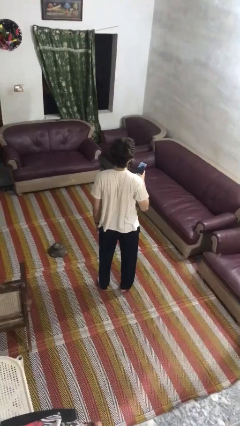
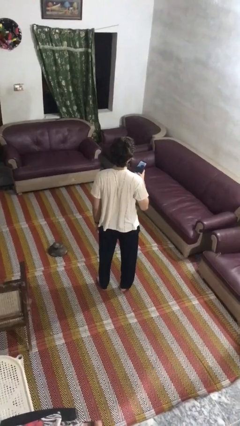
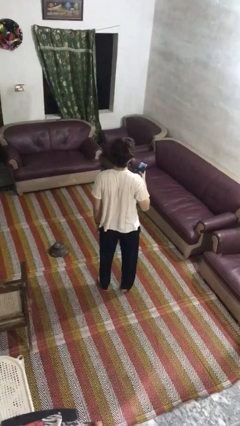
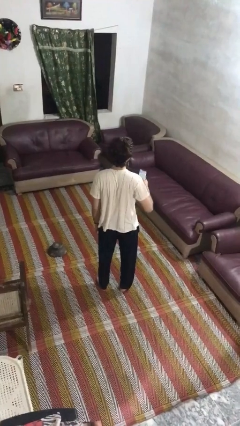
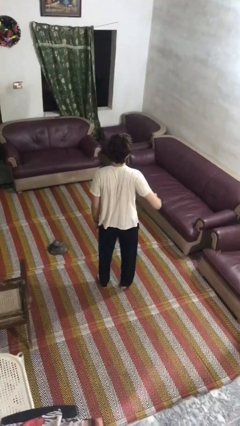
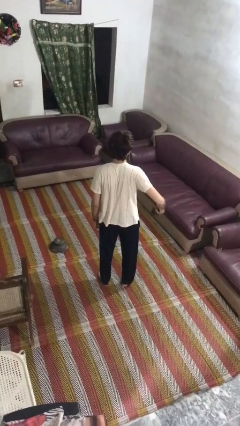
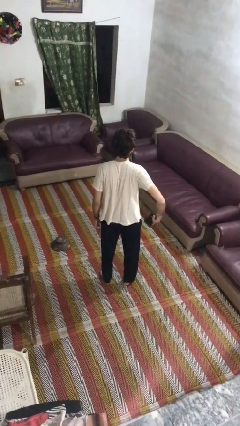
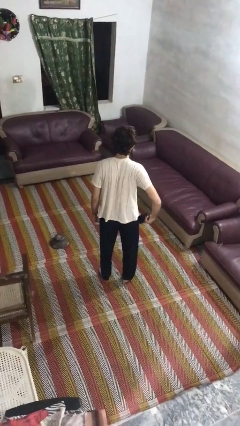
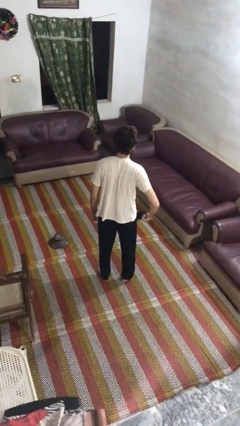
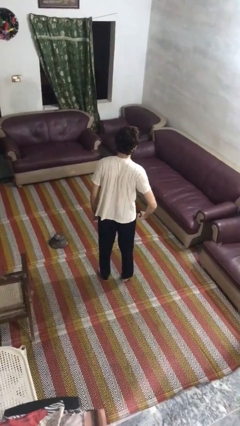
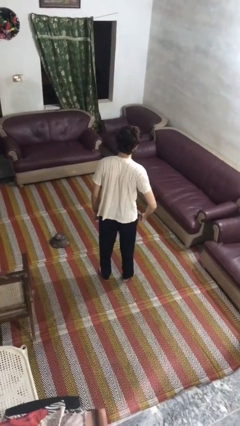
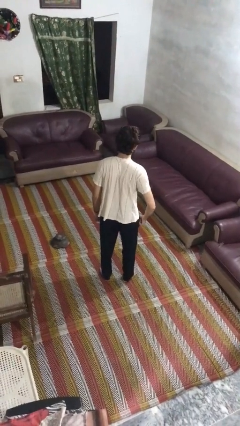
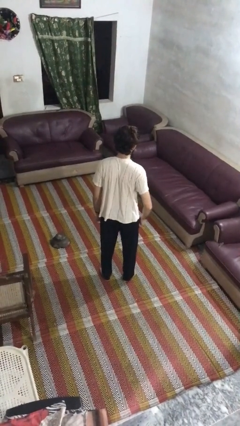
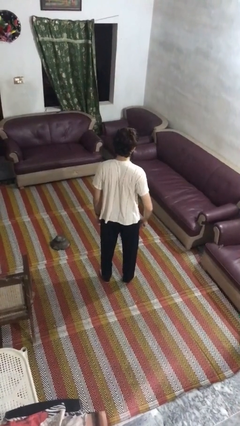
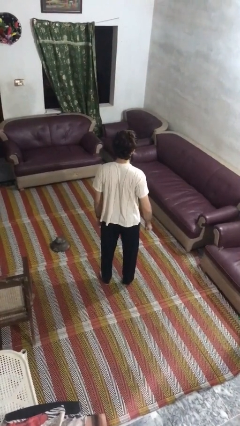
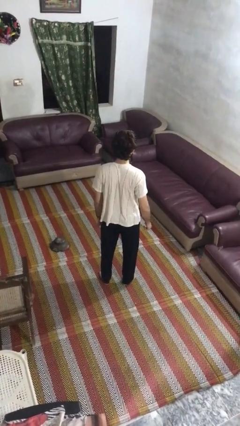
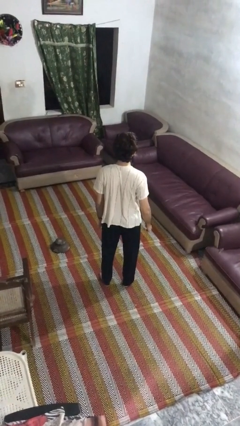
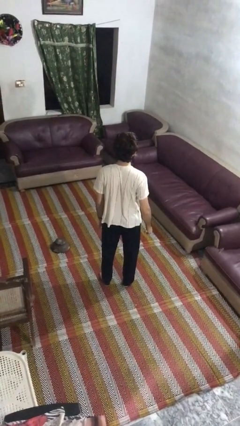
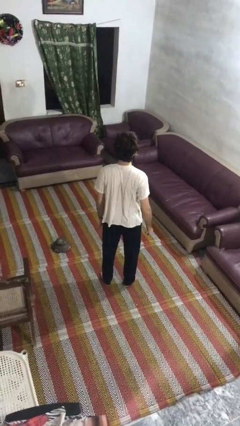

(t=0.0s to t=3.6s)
person puts phone into pocket

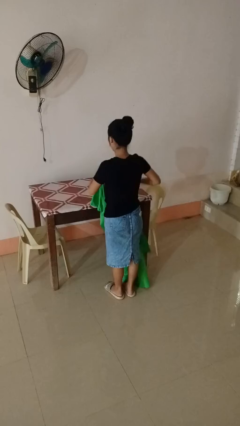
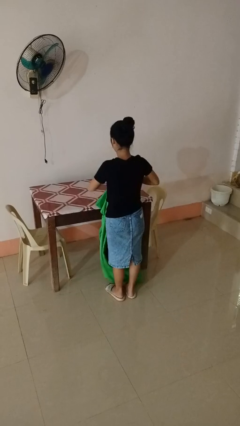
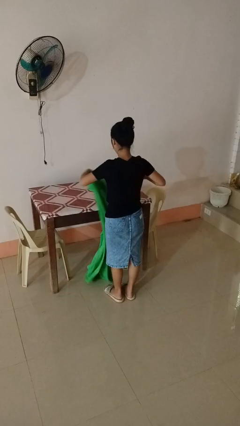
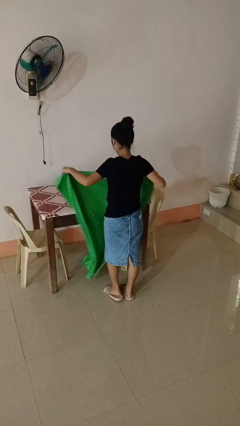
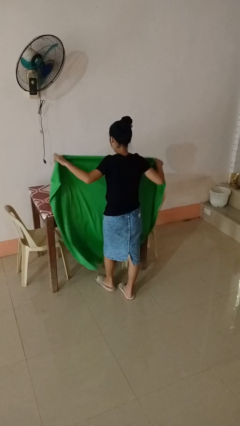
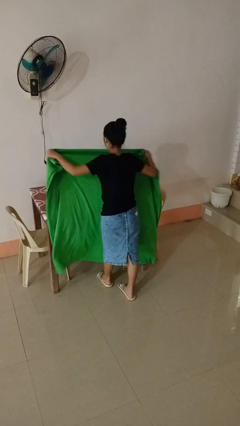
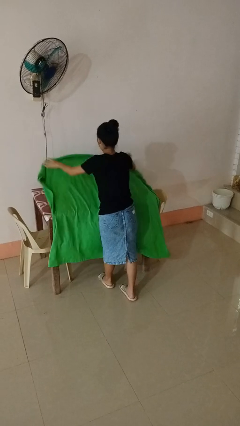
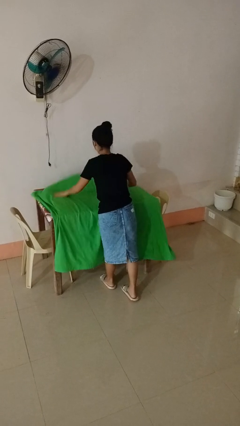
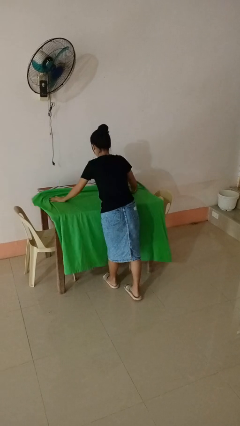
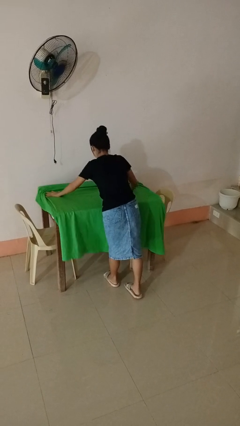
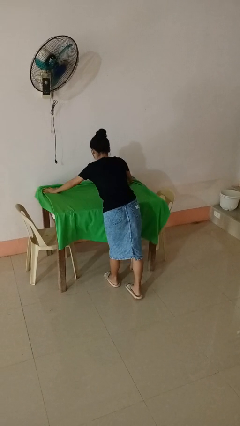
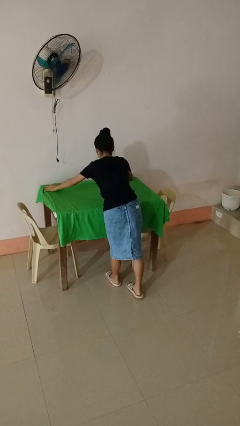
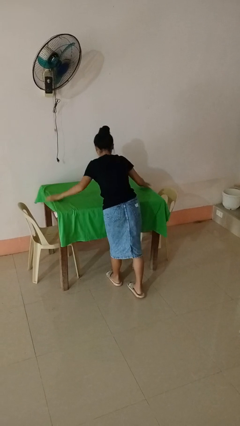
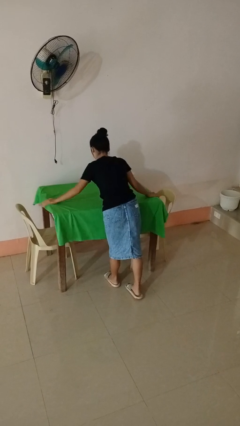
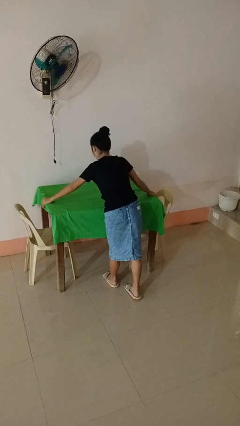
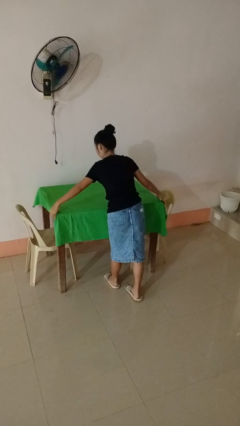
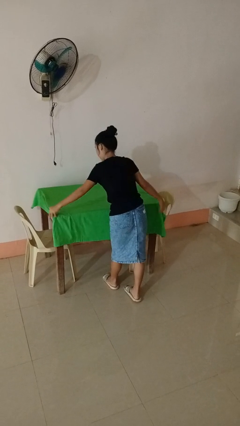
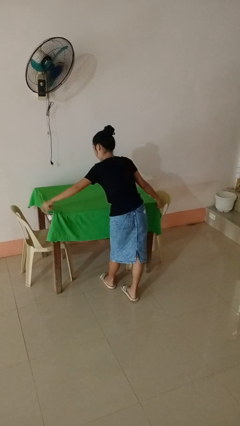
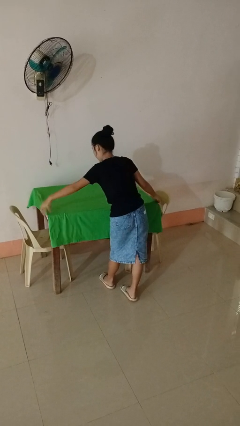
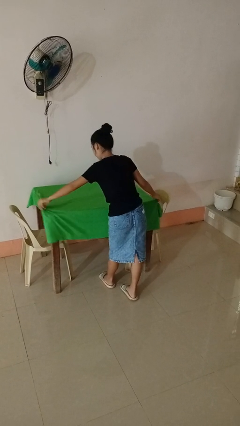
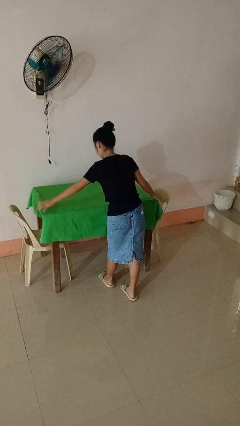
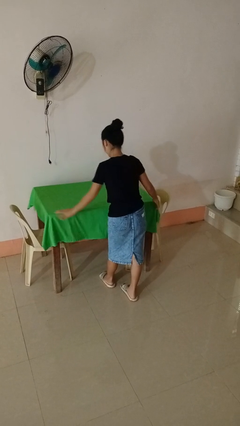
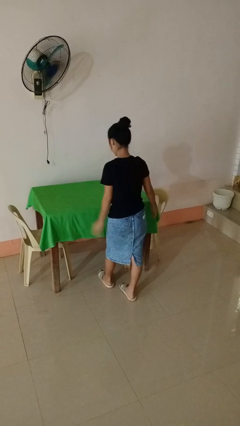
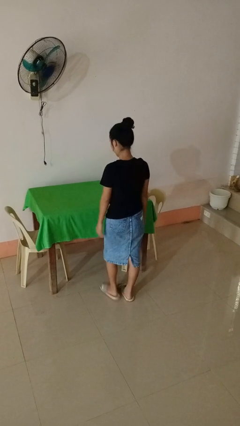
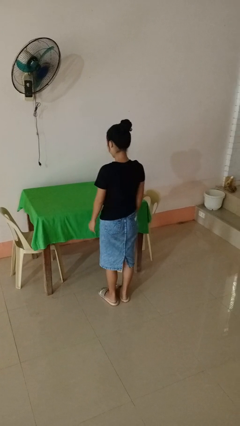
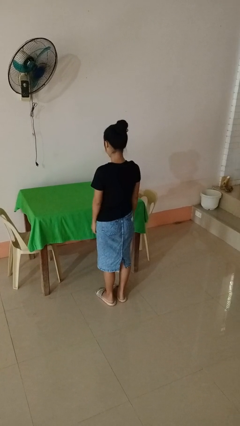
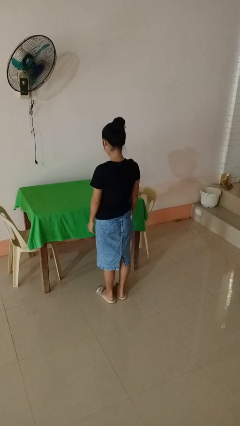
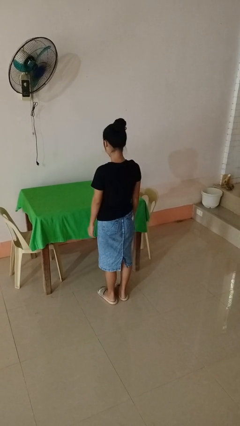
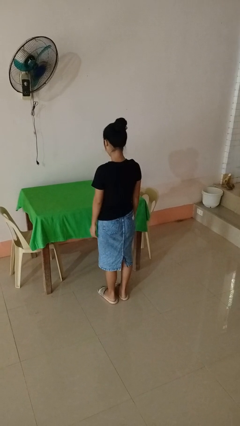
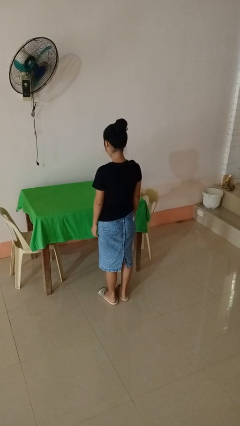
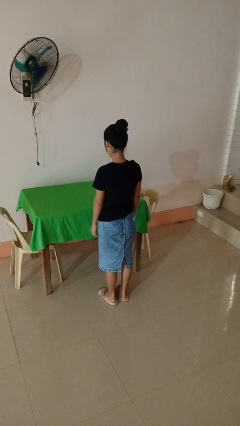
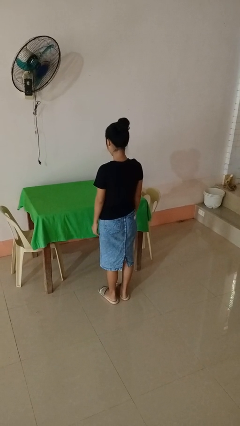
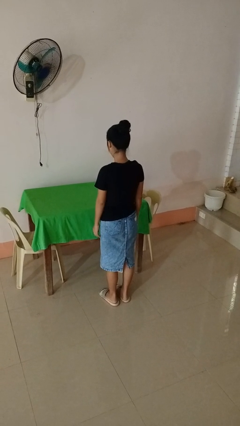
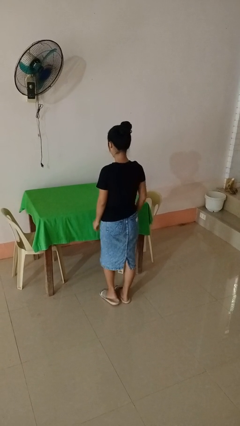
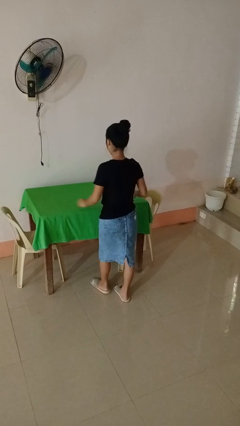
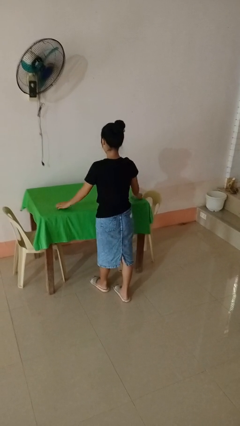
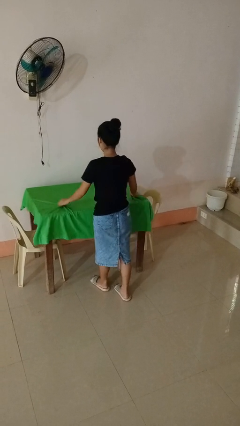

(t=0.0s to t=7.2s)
person spreads tablecloth

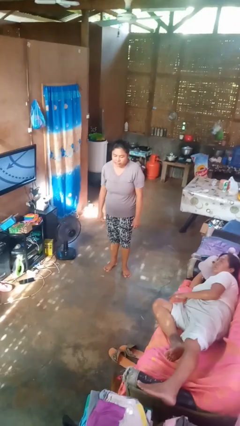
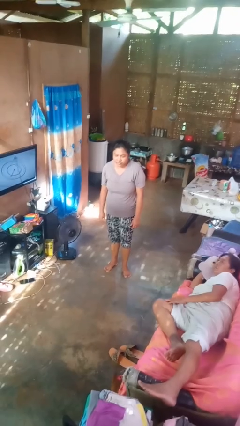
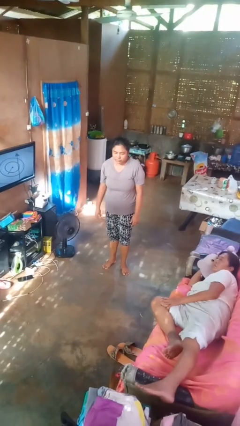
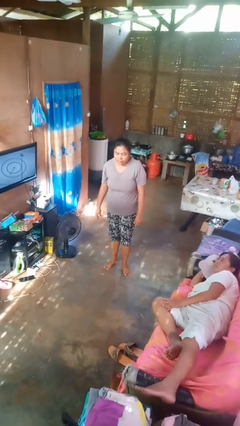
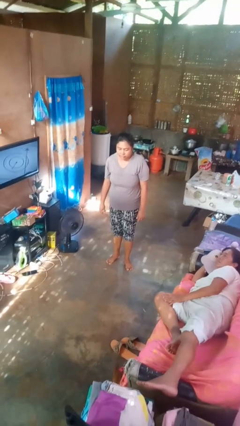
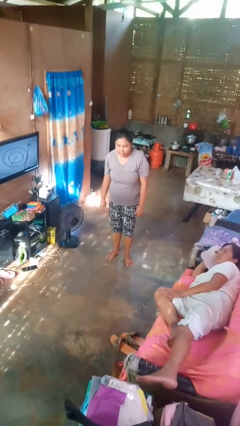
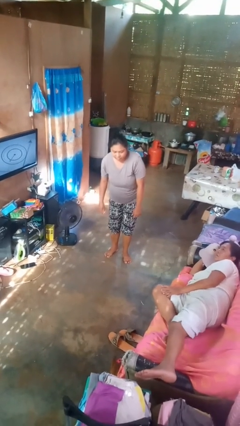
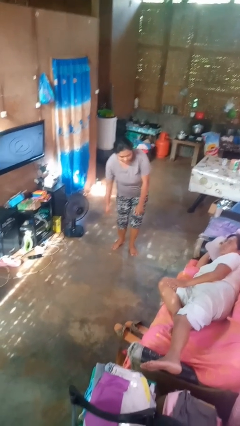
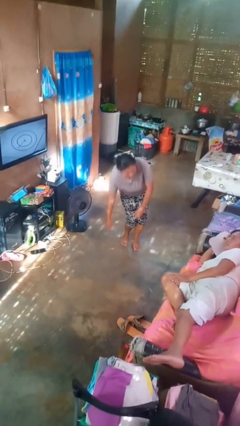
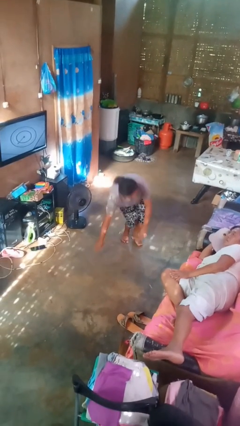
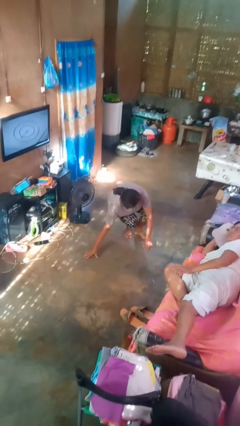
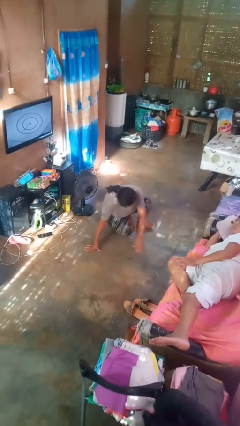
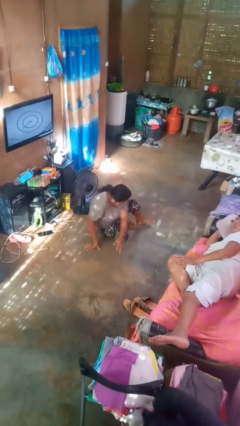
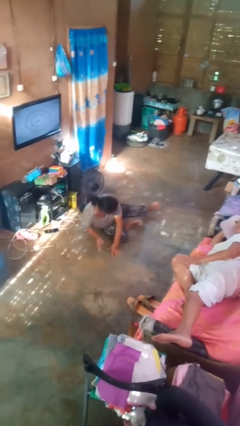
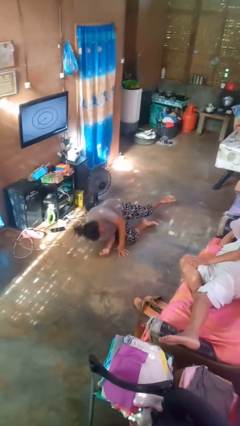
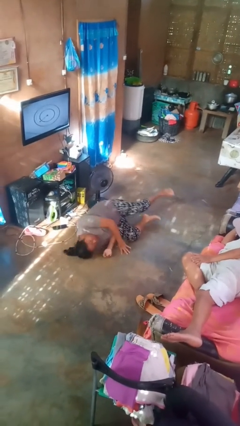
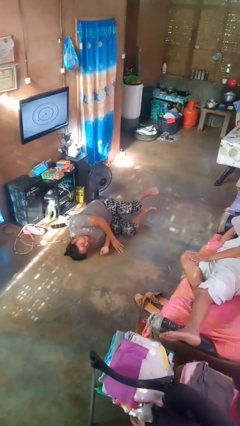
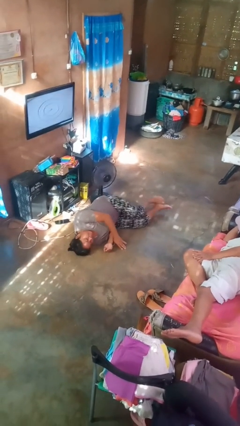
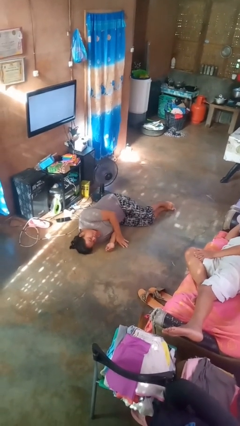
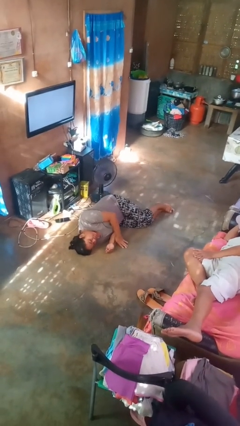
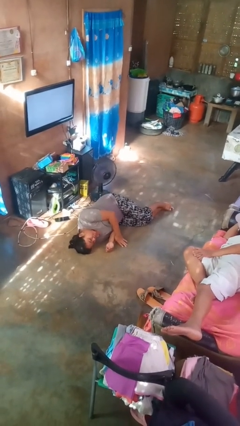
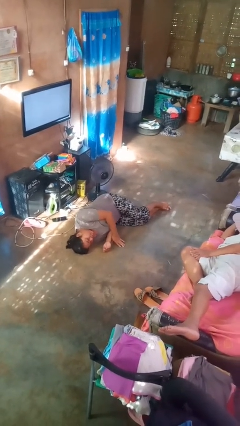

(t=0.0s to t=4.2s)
person falls while standing

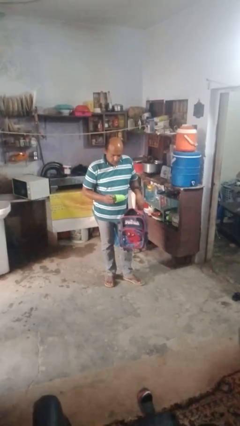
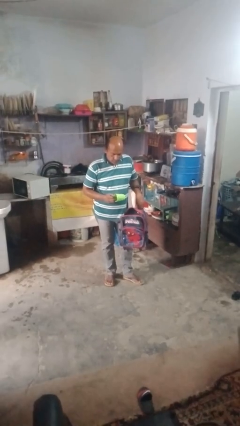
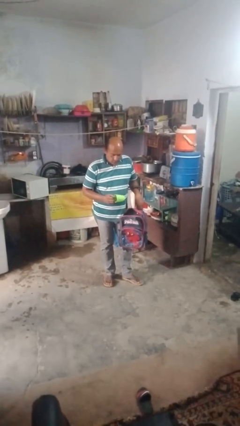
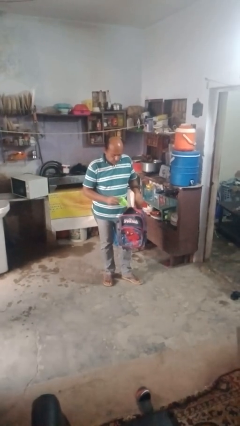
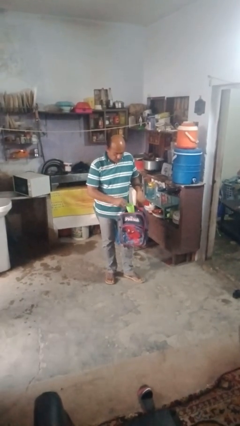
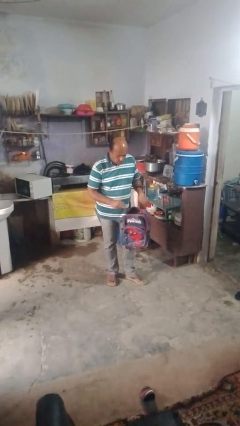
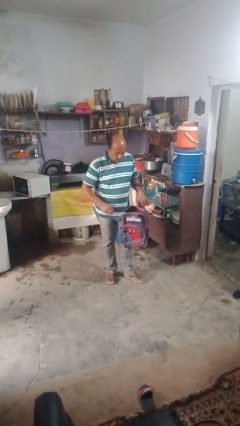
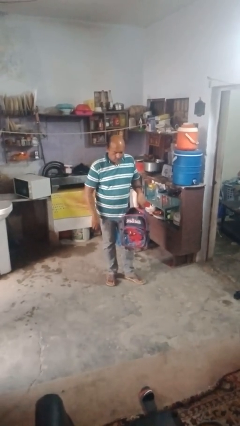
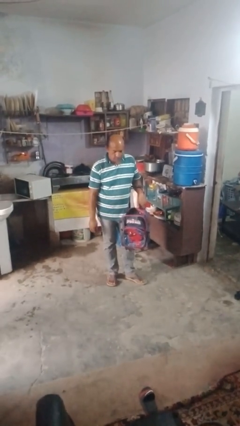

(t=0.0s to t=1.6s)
person puts object into bag

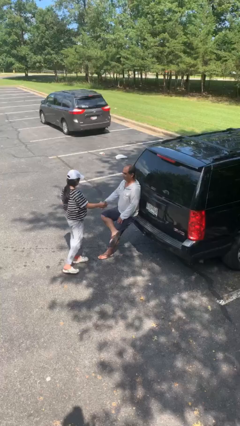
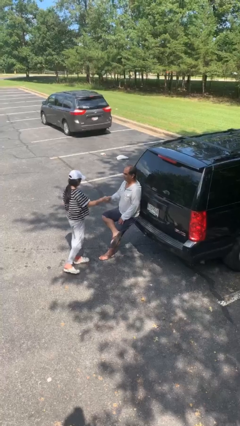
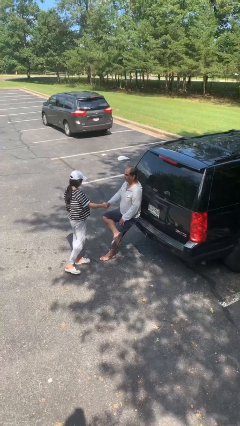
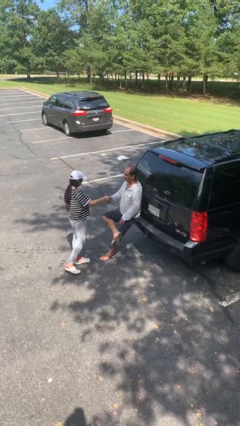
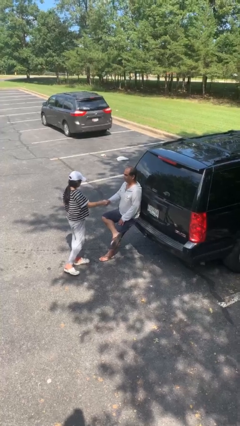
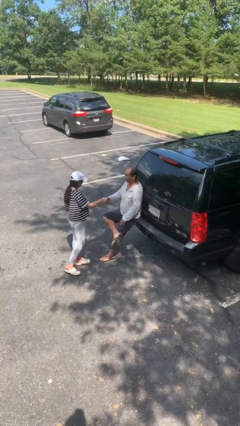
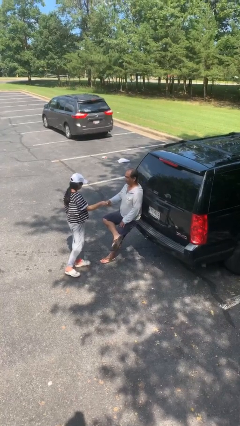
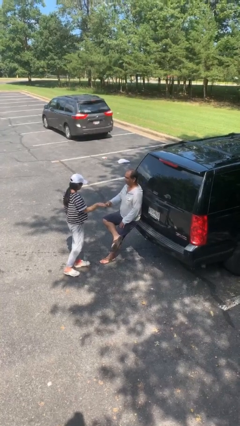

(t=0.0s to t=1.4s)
person shakes hand
